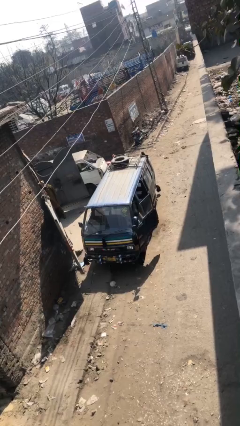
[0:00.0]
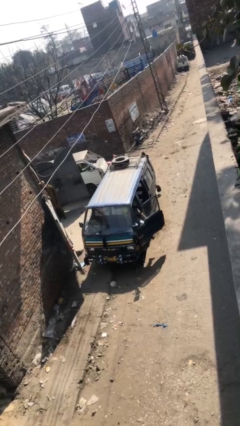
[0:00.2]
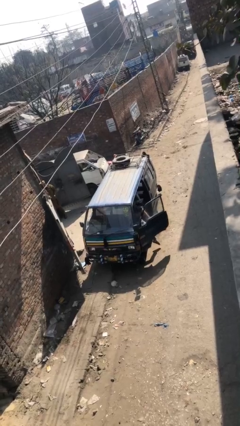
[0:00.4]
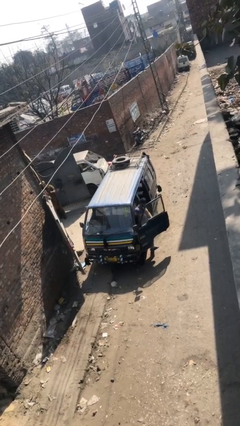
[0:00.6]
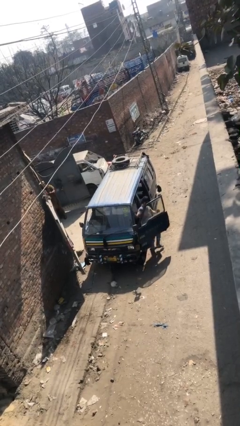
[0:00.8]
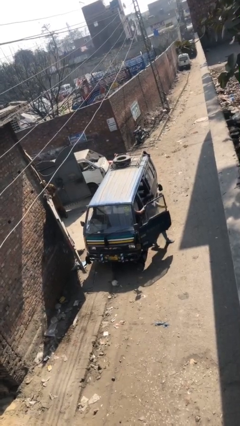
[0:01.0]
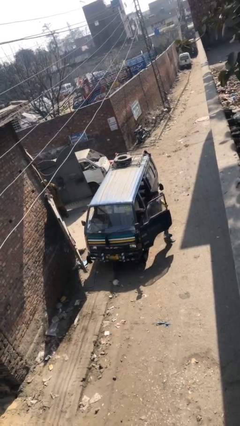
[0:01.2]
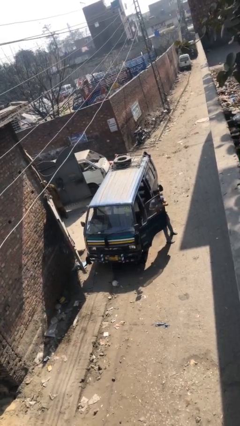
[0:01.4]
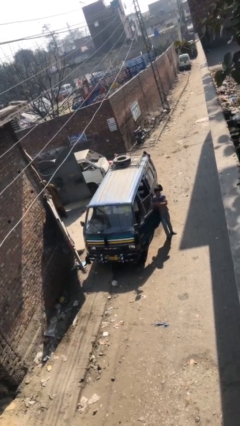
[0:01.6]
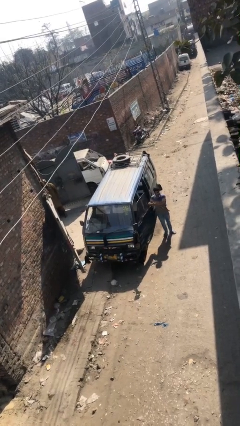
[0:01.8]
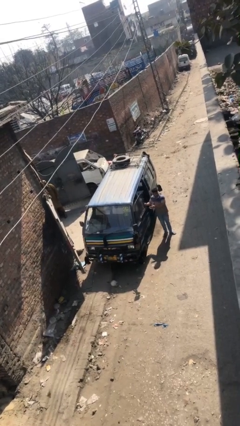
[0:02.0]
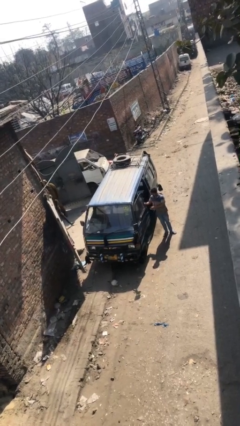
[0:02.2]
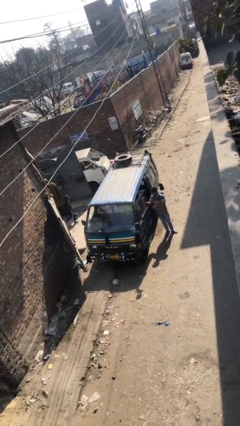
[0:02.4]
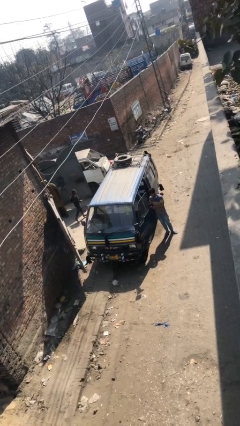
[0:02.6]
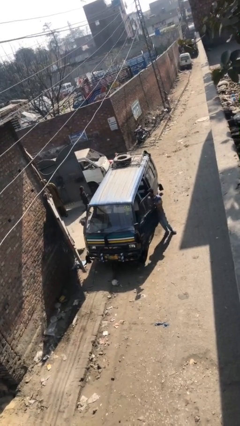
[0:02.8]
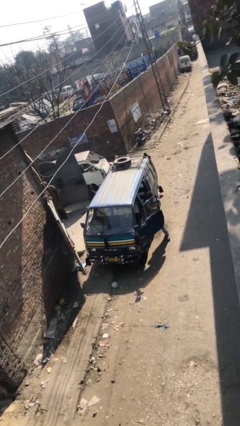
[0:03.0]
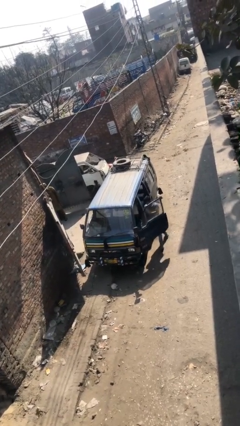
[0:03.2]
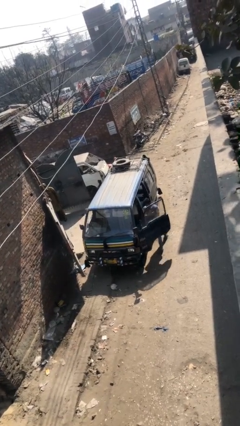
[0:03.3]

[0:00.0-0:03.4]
car drops off person

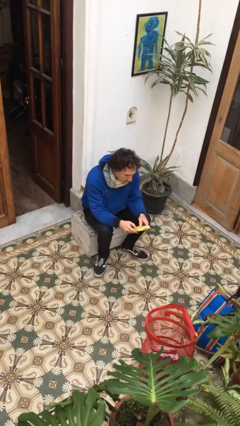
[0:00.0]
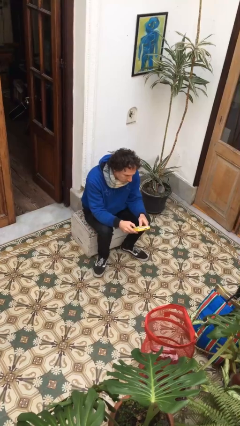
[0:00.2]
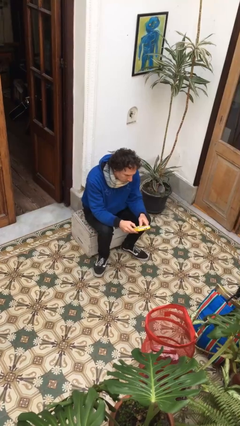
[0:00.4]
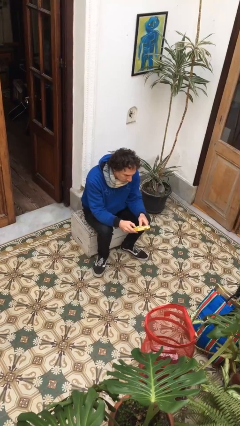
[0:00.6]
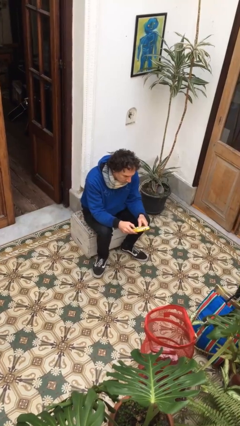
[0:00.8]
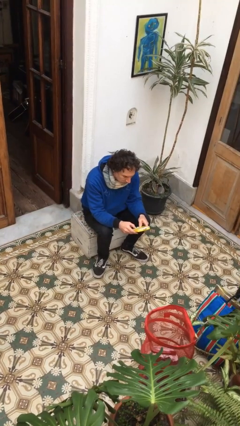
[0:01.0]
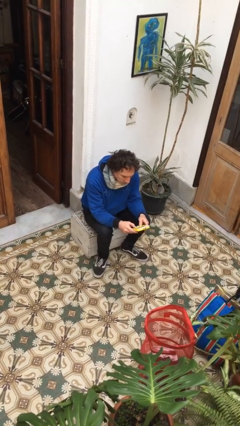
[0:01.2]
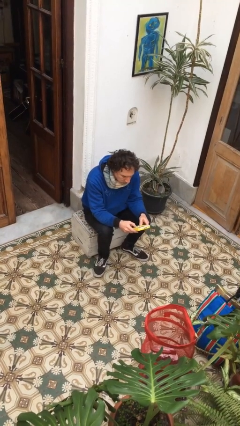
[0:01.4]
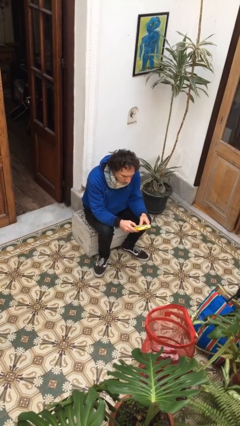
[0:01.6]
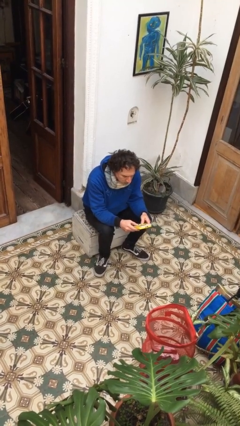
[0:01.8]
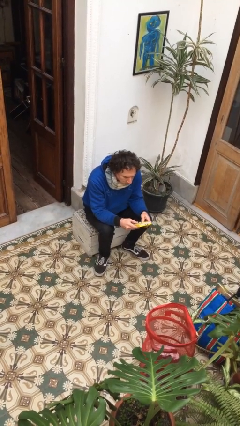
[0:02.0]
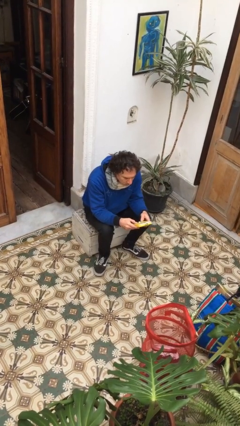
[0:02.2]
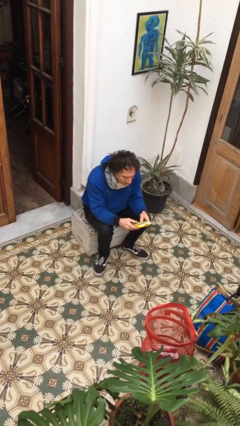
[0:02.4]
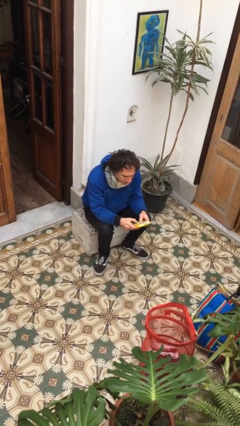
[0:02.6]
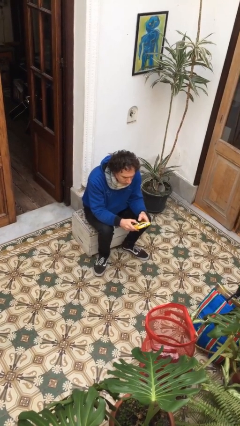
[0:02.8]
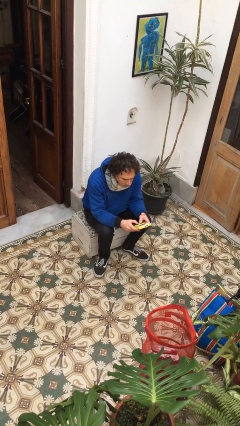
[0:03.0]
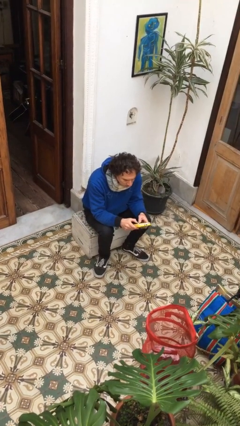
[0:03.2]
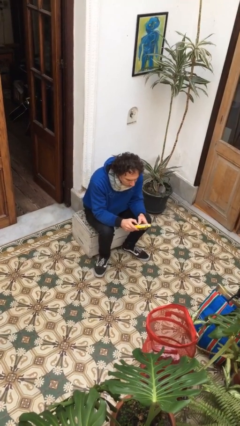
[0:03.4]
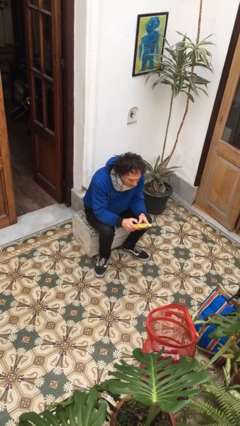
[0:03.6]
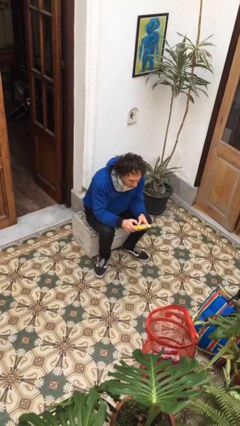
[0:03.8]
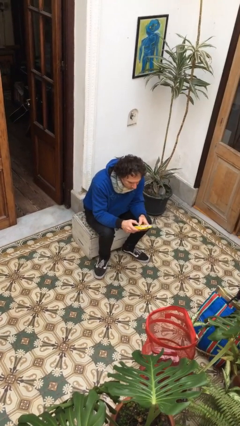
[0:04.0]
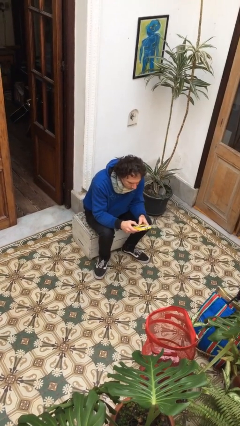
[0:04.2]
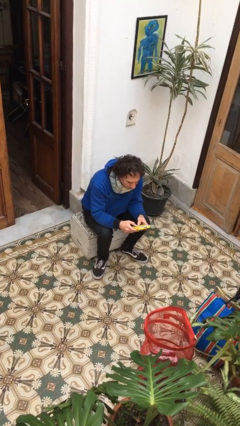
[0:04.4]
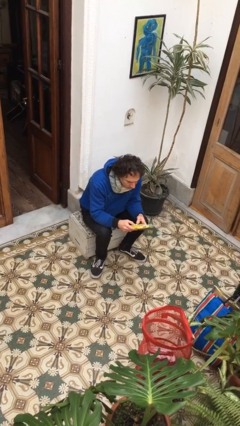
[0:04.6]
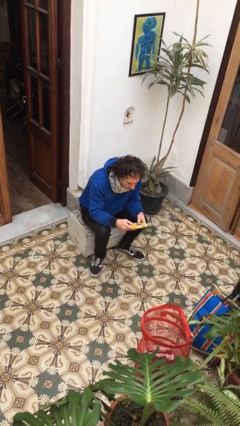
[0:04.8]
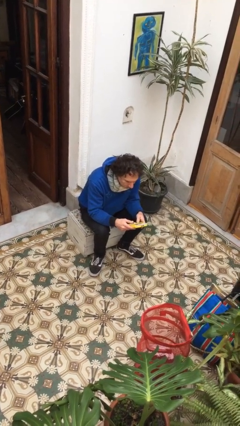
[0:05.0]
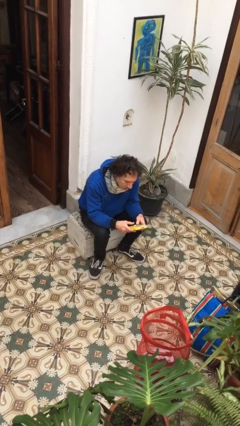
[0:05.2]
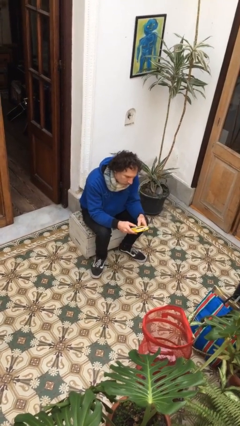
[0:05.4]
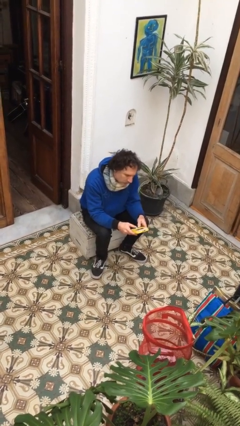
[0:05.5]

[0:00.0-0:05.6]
person interacts with handheld game

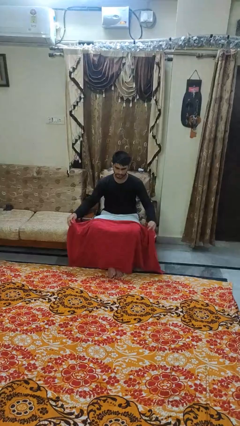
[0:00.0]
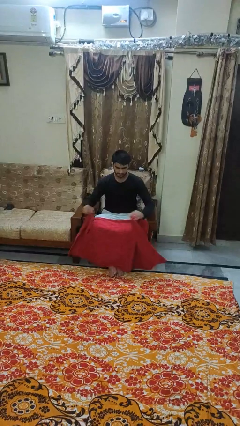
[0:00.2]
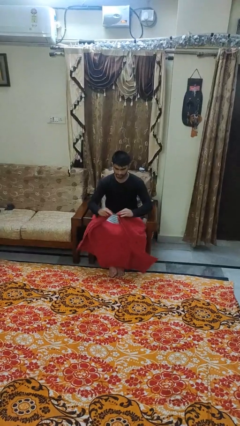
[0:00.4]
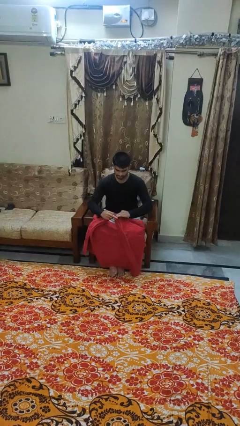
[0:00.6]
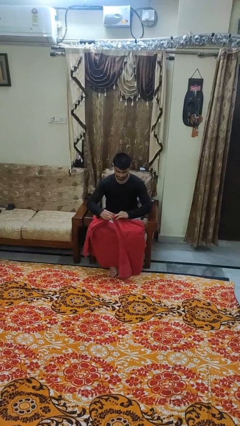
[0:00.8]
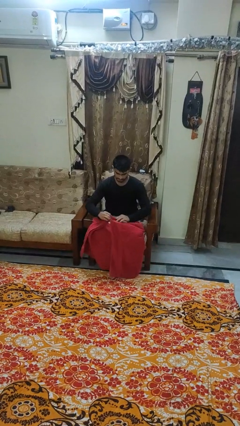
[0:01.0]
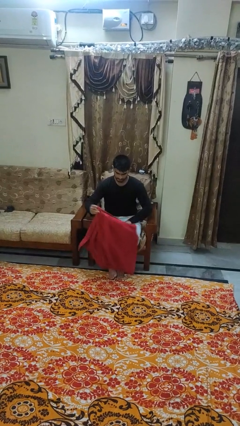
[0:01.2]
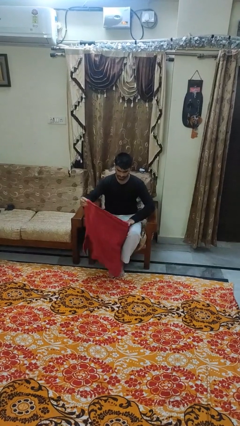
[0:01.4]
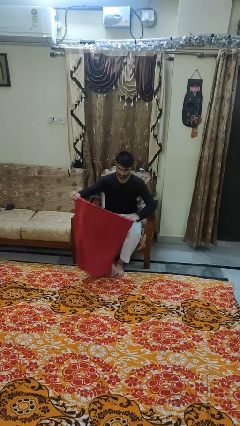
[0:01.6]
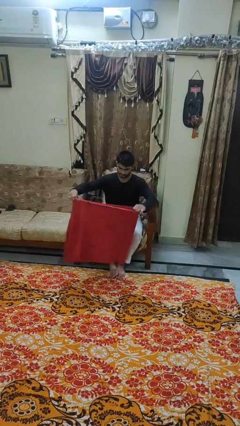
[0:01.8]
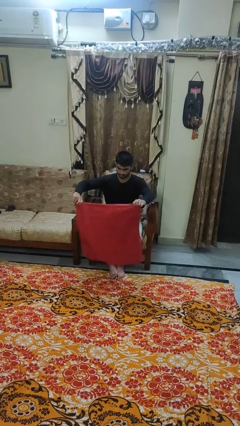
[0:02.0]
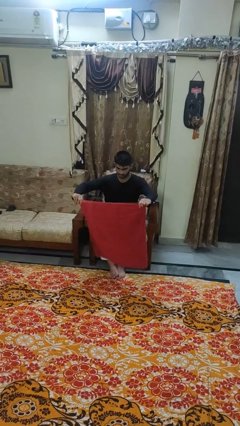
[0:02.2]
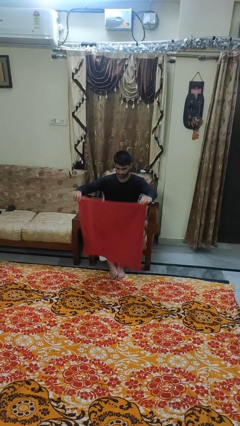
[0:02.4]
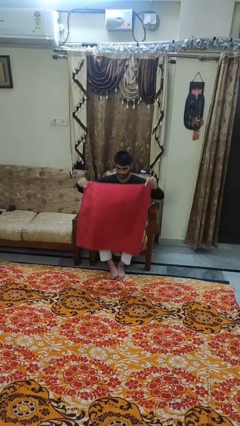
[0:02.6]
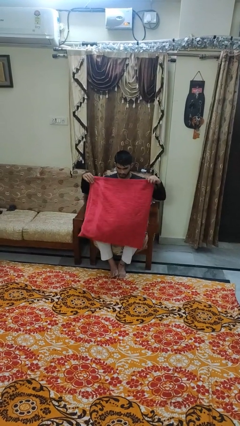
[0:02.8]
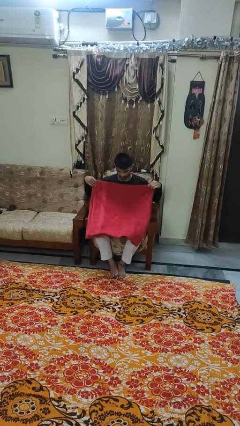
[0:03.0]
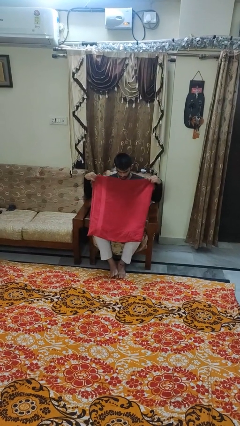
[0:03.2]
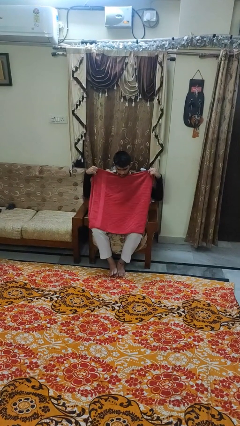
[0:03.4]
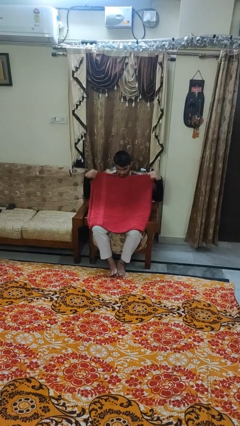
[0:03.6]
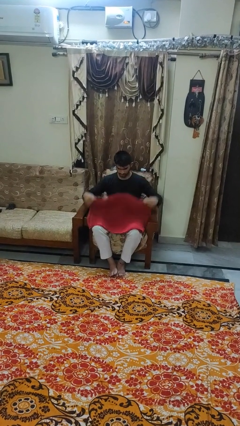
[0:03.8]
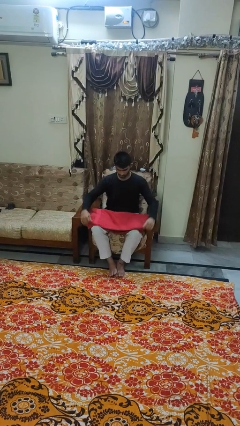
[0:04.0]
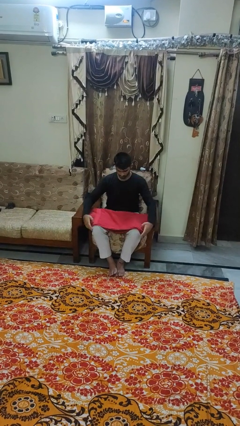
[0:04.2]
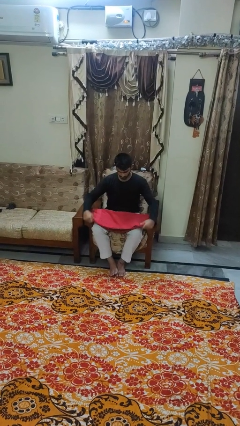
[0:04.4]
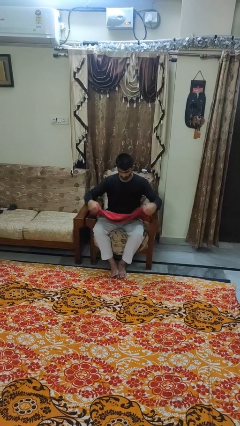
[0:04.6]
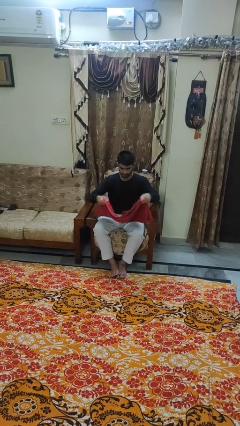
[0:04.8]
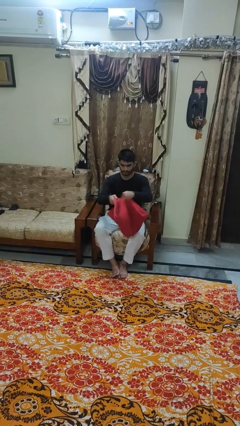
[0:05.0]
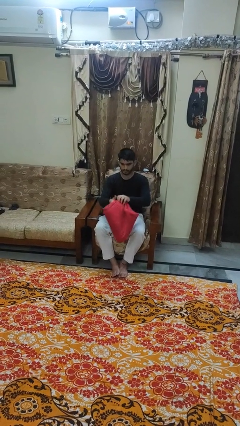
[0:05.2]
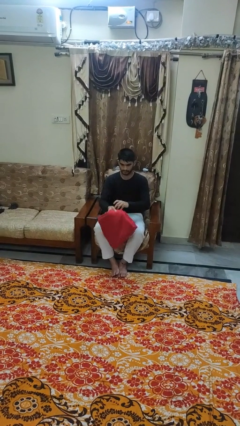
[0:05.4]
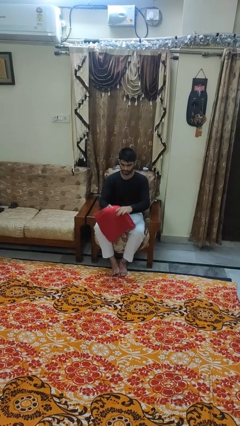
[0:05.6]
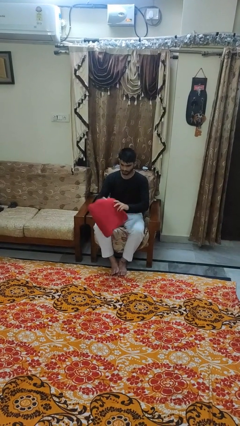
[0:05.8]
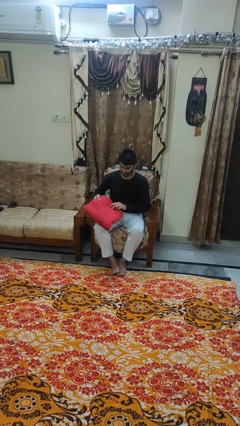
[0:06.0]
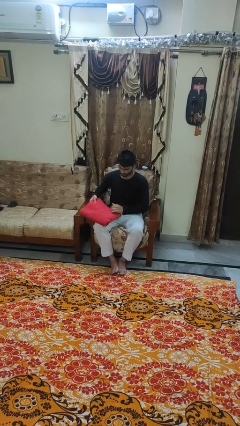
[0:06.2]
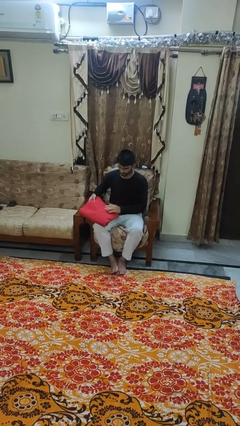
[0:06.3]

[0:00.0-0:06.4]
person folds towel

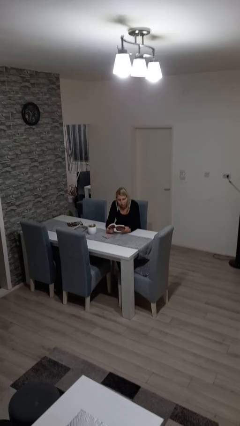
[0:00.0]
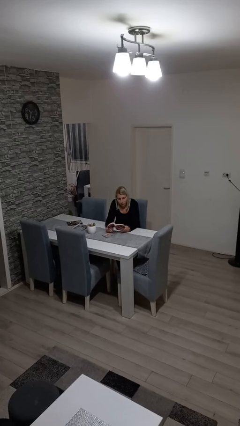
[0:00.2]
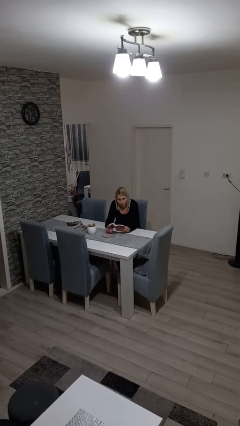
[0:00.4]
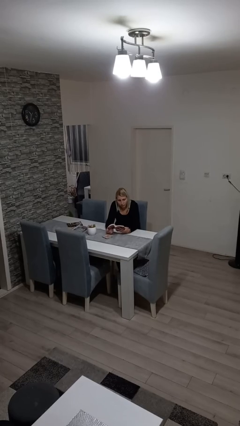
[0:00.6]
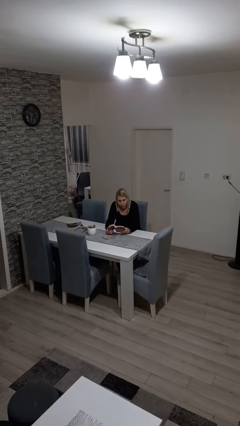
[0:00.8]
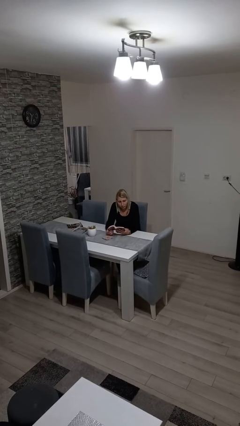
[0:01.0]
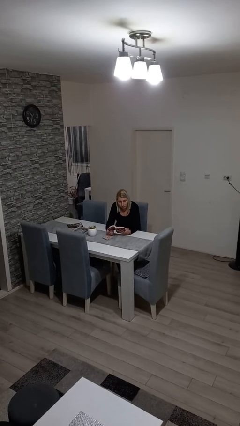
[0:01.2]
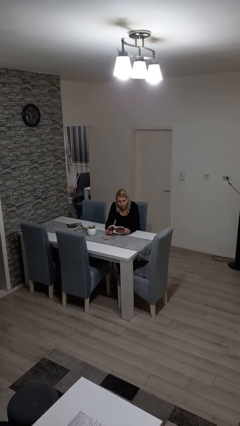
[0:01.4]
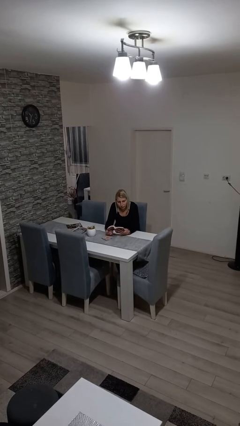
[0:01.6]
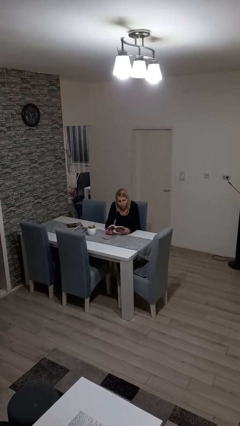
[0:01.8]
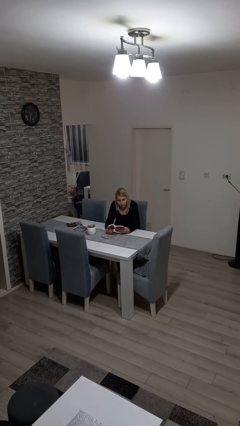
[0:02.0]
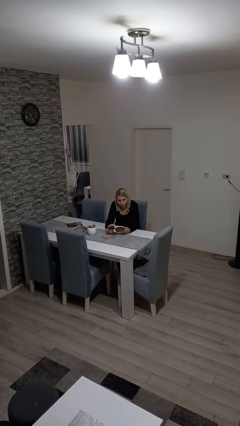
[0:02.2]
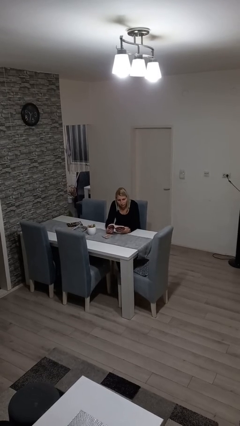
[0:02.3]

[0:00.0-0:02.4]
person reads book
